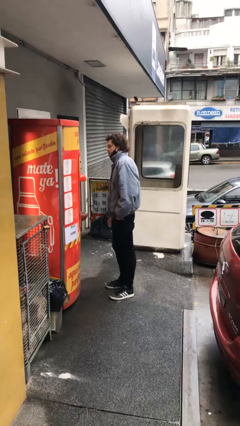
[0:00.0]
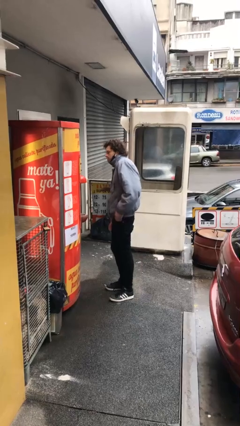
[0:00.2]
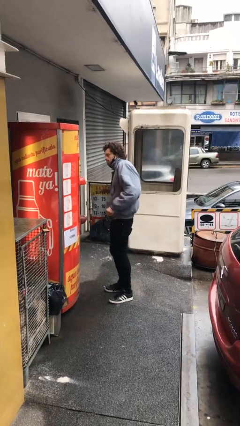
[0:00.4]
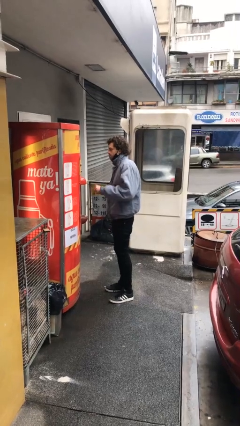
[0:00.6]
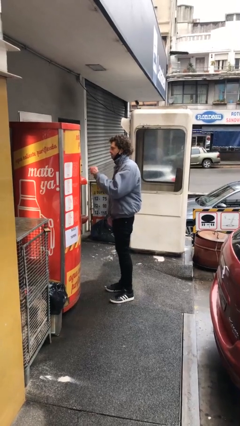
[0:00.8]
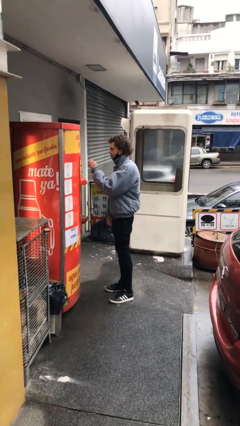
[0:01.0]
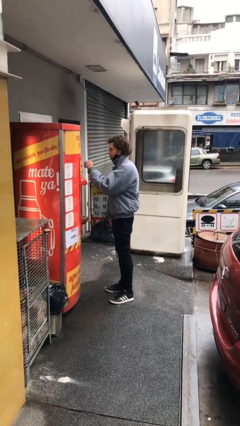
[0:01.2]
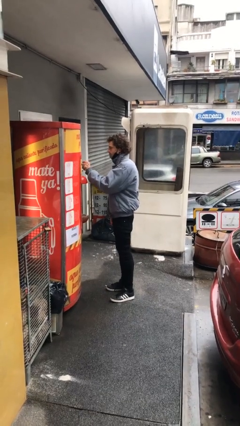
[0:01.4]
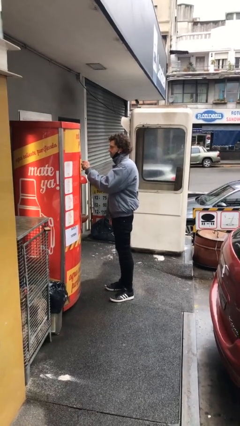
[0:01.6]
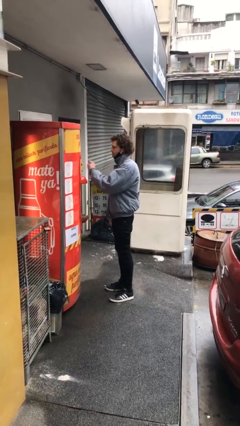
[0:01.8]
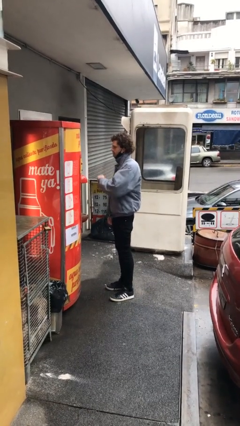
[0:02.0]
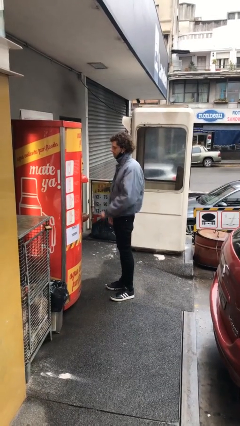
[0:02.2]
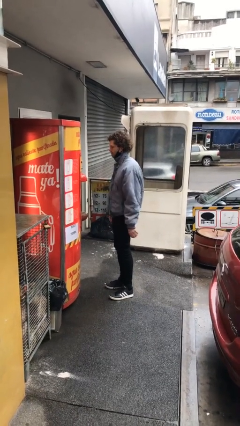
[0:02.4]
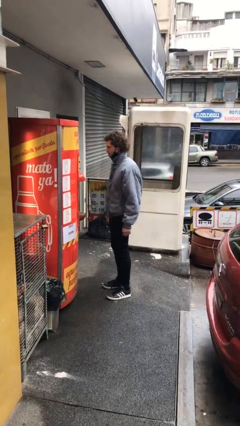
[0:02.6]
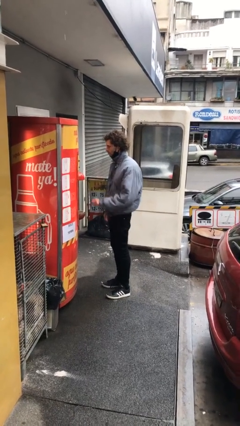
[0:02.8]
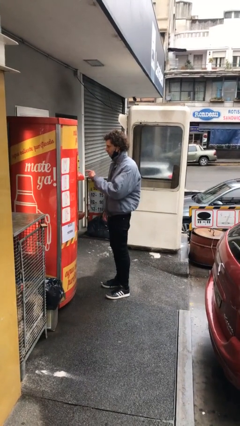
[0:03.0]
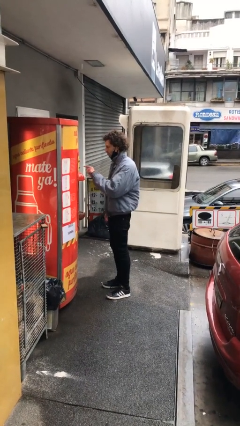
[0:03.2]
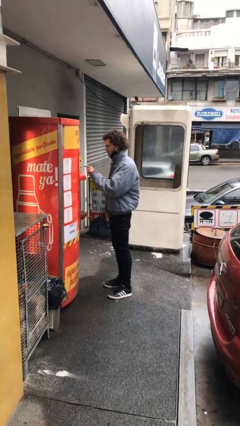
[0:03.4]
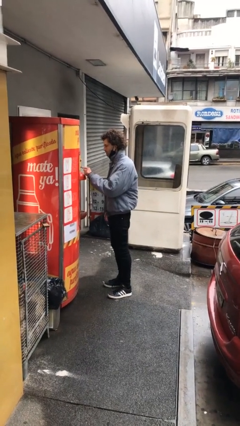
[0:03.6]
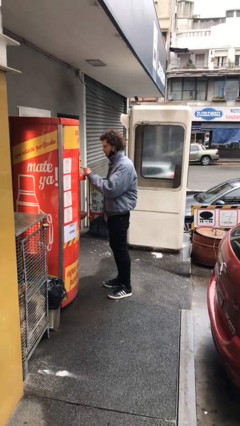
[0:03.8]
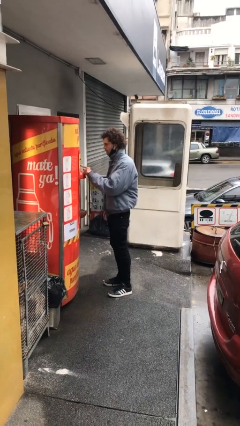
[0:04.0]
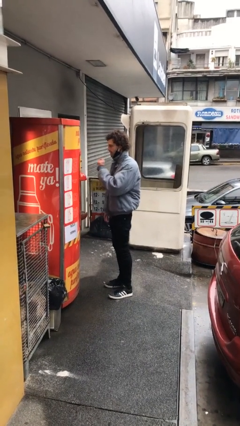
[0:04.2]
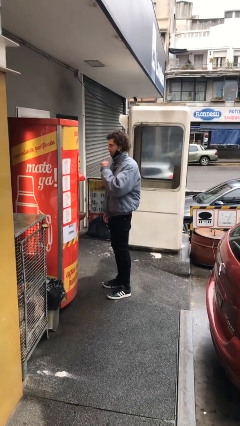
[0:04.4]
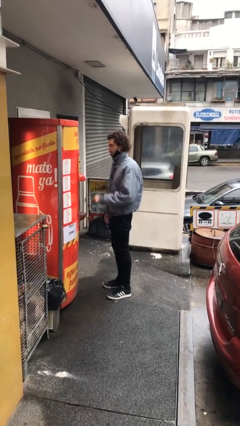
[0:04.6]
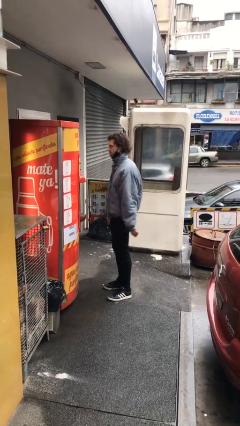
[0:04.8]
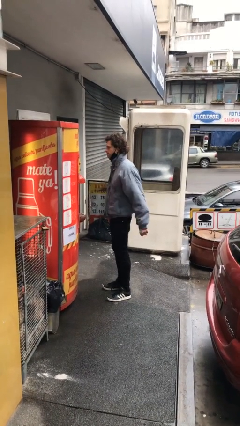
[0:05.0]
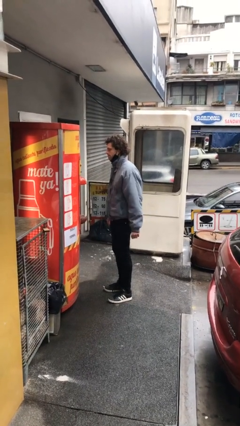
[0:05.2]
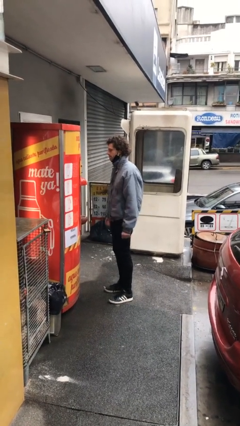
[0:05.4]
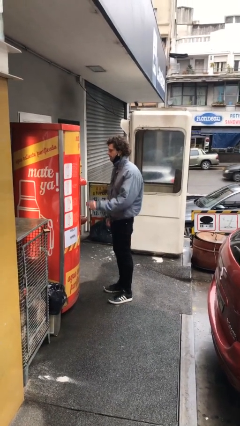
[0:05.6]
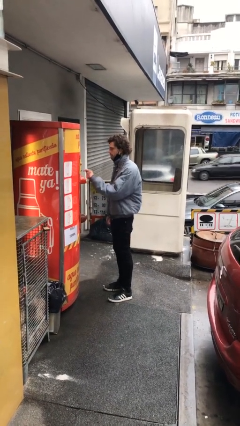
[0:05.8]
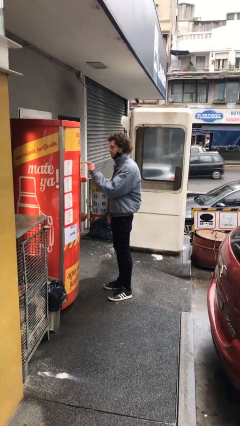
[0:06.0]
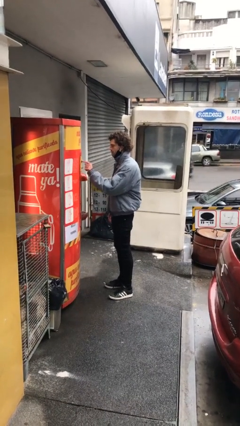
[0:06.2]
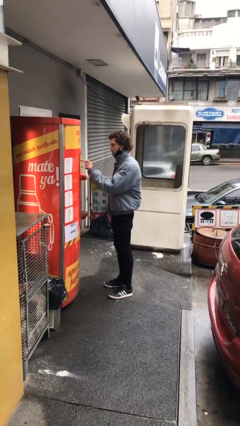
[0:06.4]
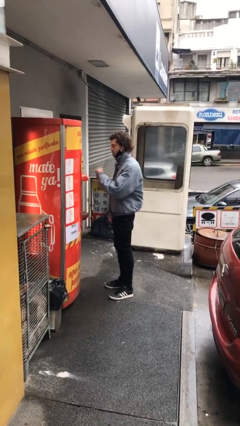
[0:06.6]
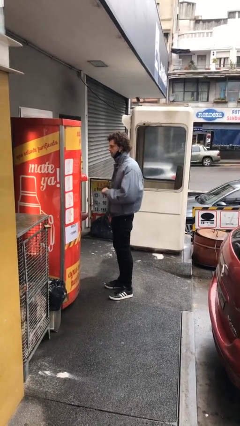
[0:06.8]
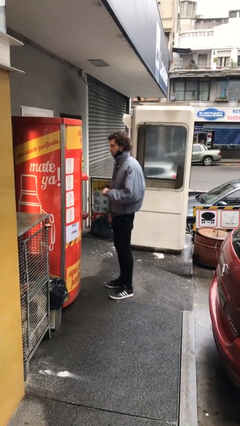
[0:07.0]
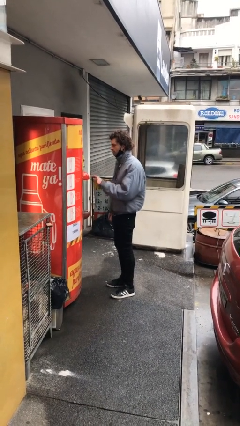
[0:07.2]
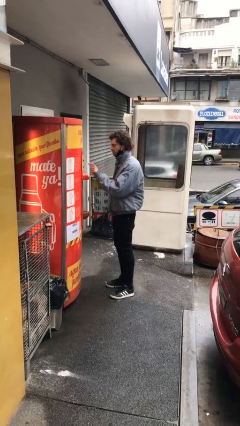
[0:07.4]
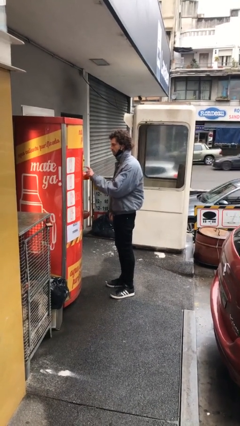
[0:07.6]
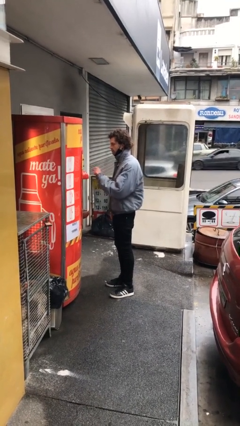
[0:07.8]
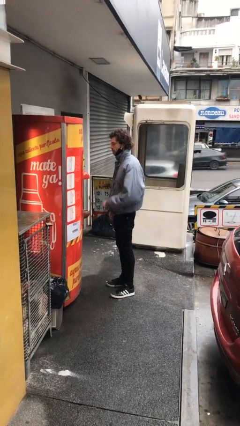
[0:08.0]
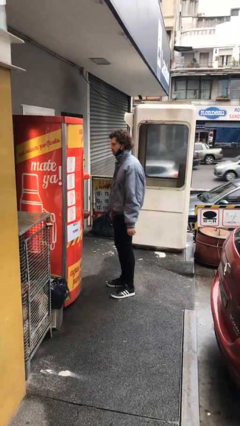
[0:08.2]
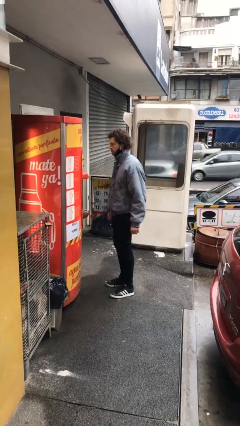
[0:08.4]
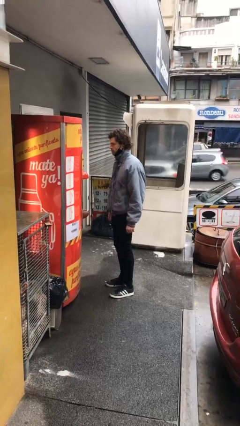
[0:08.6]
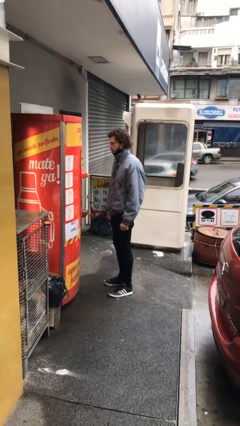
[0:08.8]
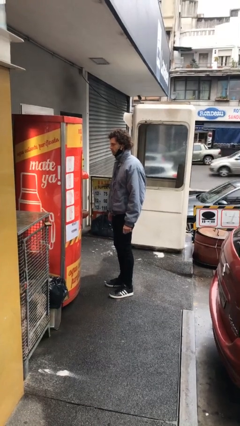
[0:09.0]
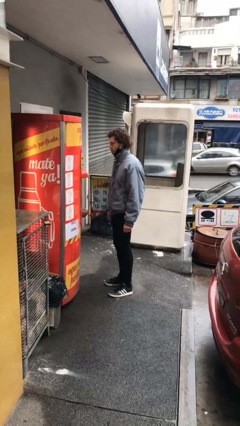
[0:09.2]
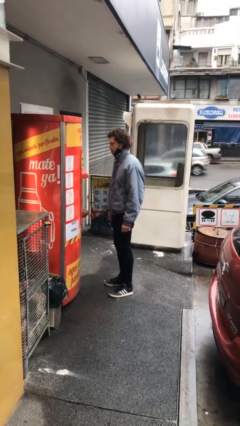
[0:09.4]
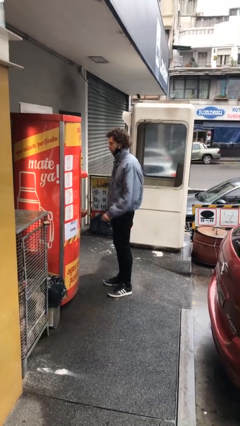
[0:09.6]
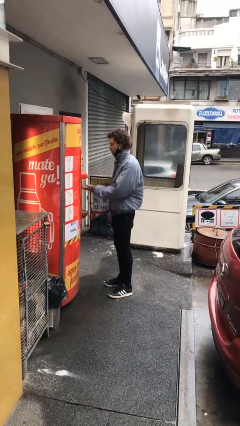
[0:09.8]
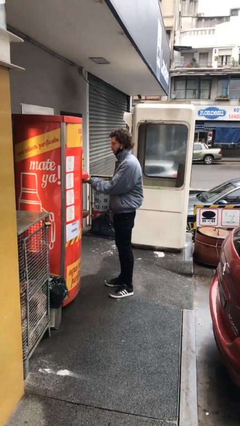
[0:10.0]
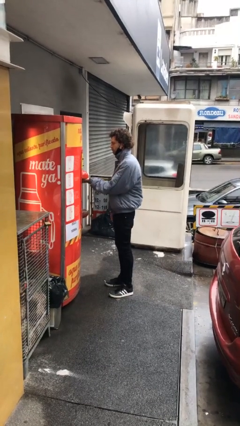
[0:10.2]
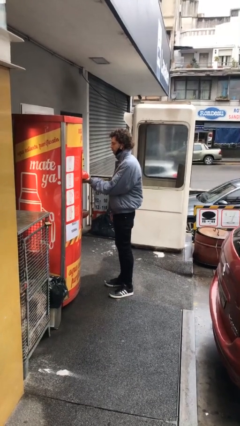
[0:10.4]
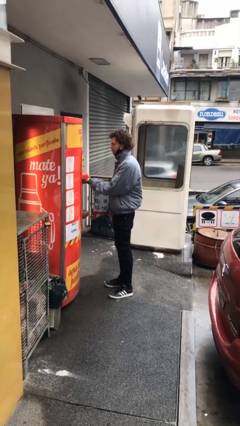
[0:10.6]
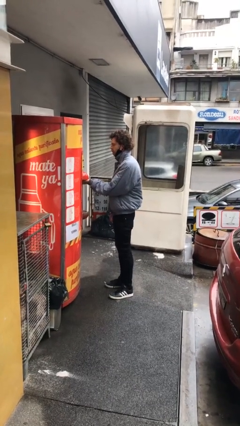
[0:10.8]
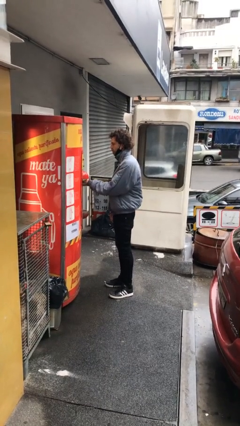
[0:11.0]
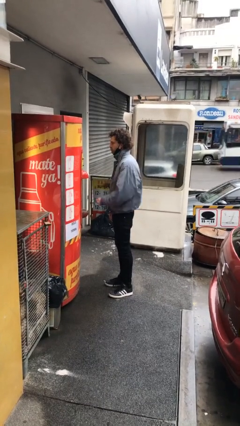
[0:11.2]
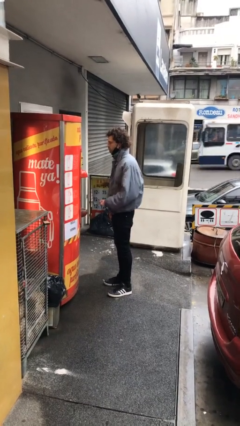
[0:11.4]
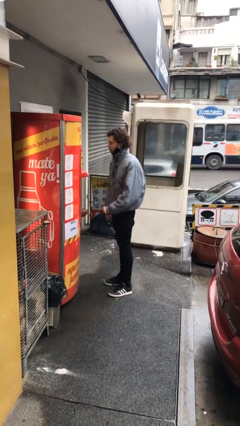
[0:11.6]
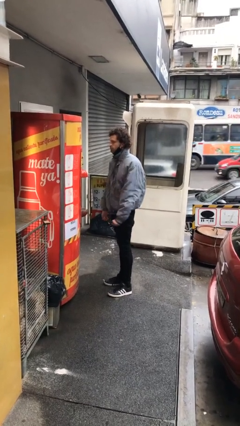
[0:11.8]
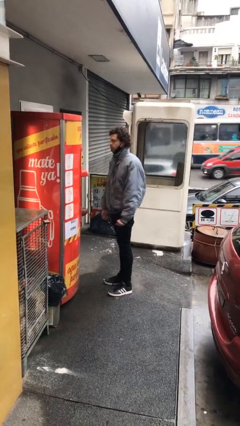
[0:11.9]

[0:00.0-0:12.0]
person purchases from machine

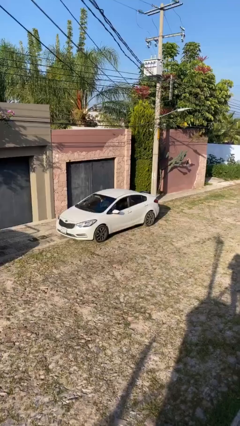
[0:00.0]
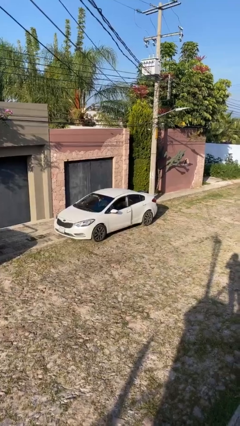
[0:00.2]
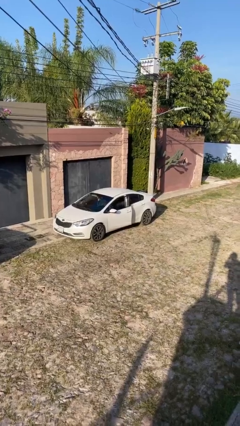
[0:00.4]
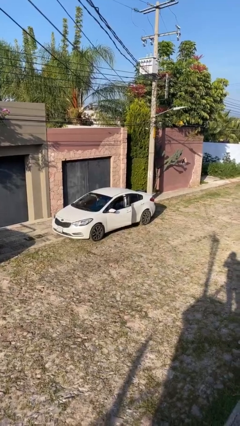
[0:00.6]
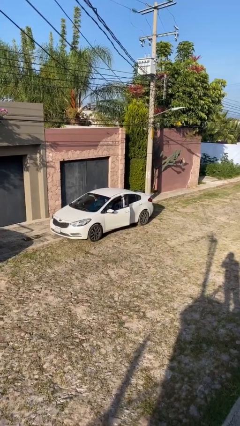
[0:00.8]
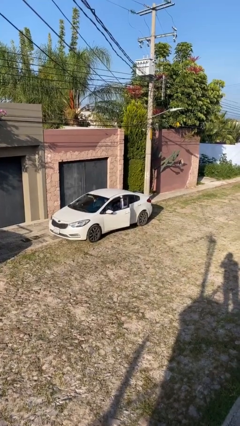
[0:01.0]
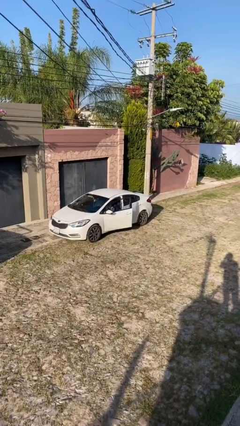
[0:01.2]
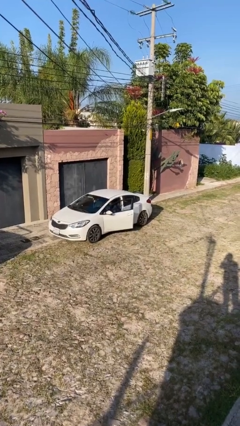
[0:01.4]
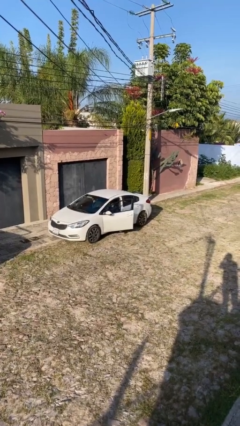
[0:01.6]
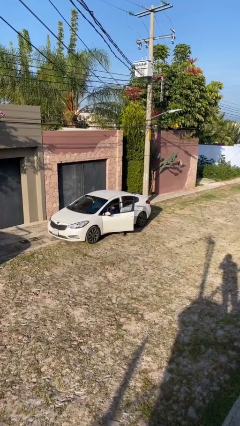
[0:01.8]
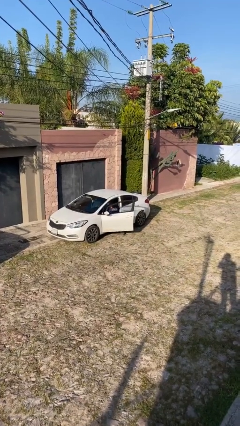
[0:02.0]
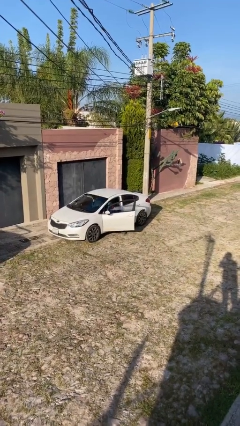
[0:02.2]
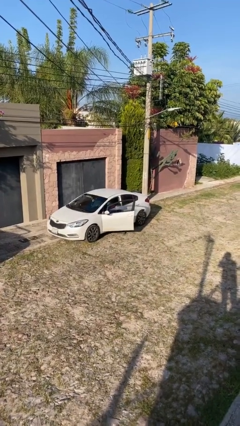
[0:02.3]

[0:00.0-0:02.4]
person opens car door

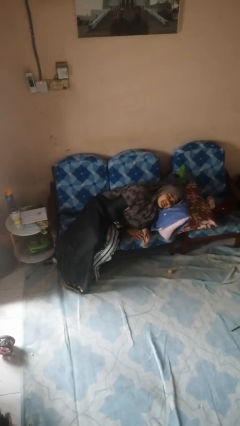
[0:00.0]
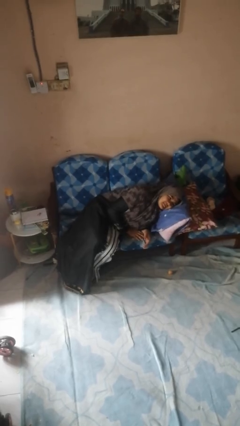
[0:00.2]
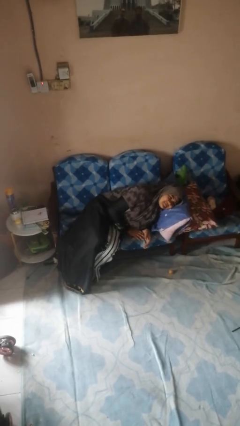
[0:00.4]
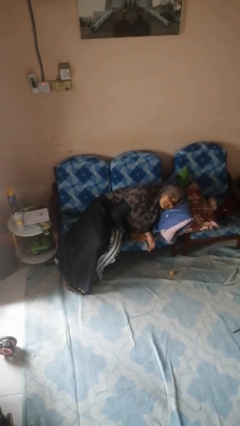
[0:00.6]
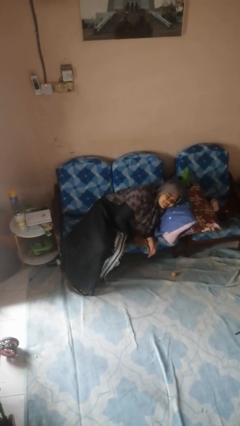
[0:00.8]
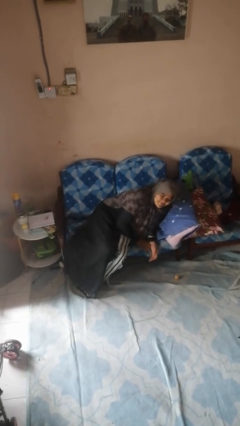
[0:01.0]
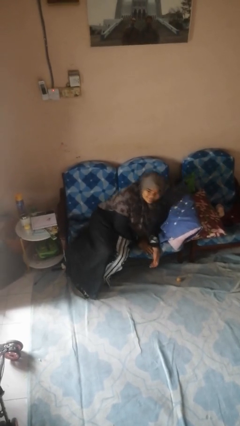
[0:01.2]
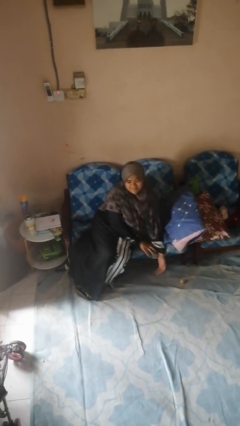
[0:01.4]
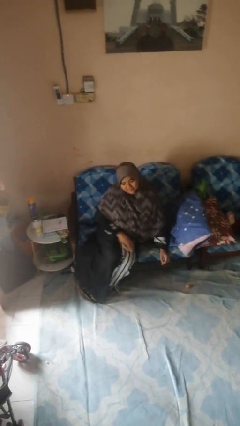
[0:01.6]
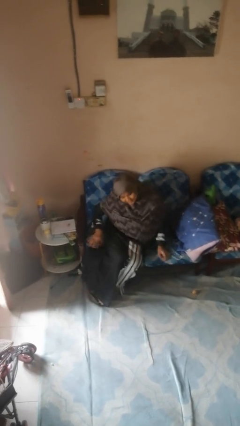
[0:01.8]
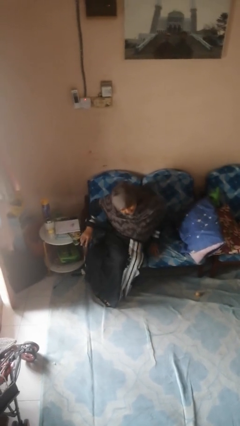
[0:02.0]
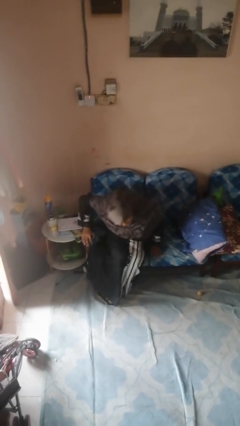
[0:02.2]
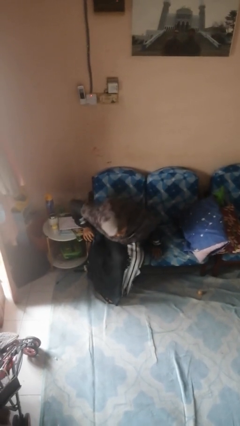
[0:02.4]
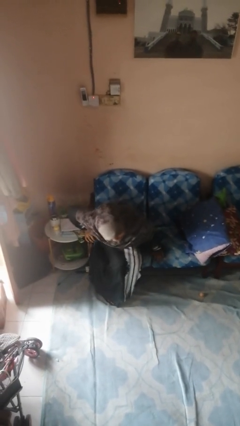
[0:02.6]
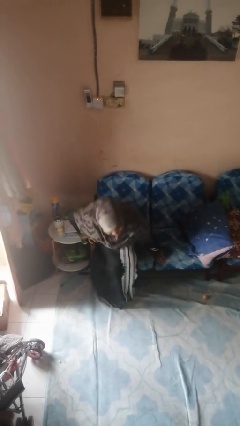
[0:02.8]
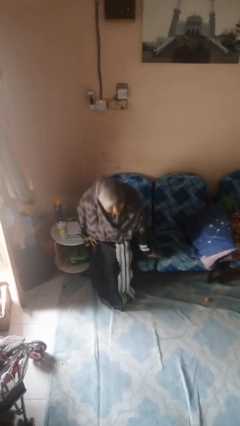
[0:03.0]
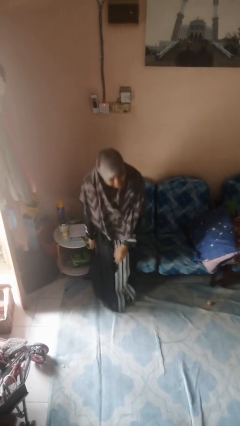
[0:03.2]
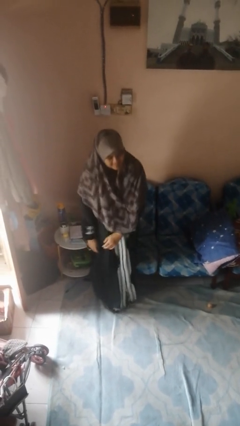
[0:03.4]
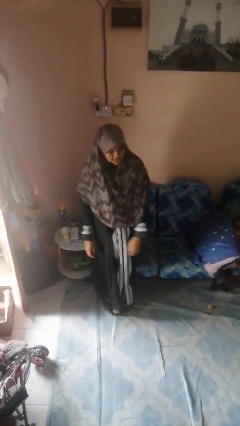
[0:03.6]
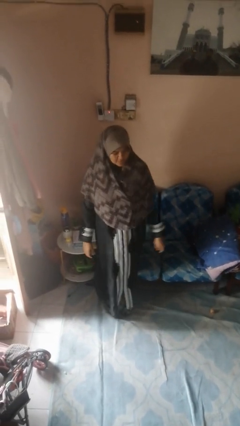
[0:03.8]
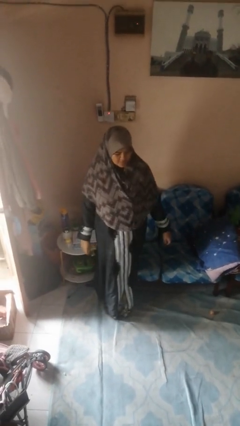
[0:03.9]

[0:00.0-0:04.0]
person stands up
